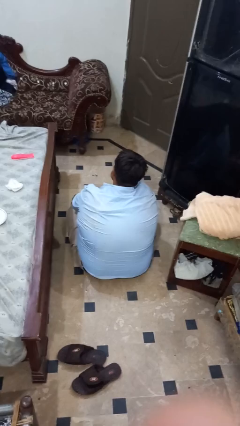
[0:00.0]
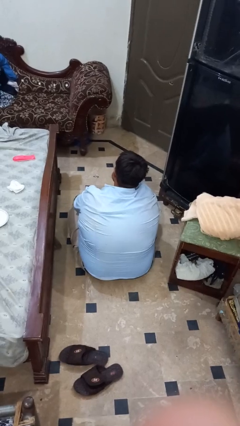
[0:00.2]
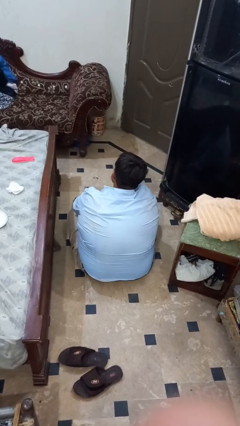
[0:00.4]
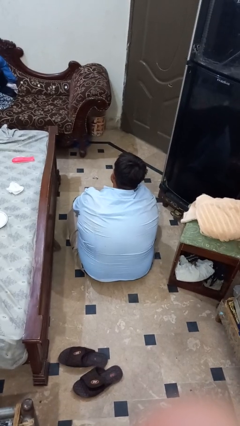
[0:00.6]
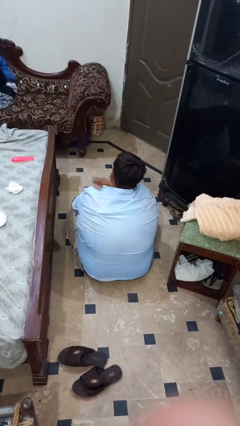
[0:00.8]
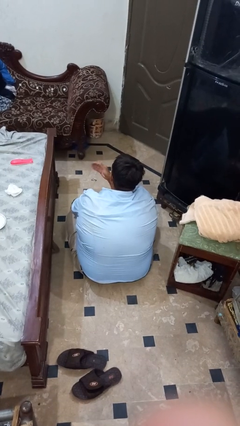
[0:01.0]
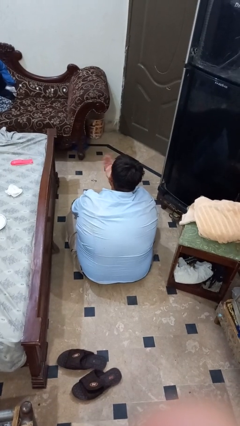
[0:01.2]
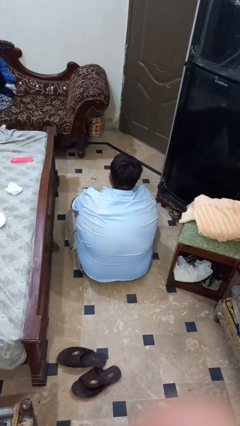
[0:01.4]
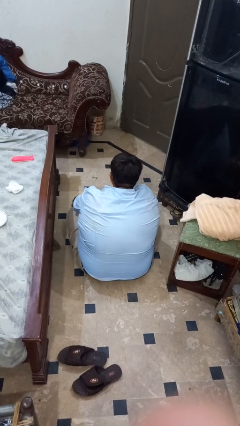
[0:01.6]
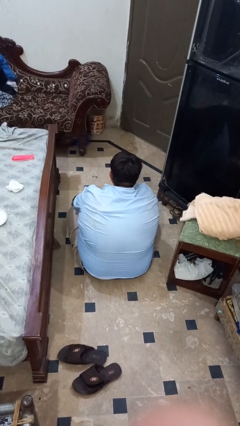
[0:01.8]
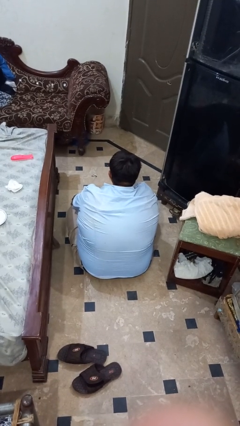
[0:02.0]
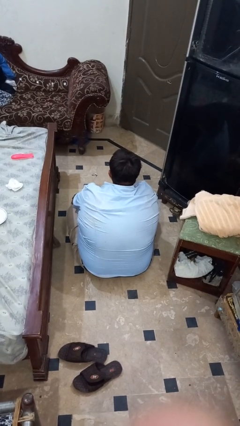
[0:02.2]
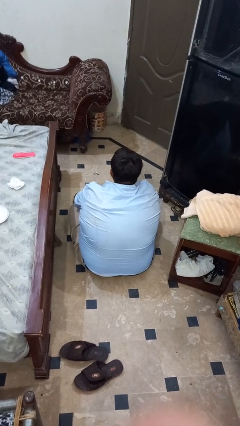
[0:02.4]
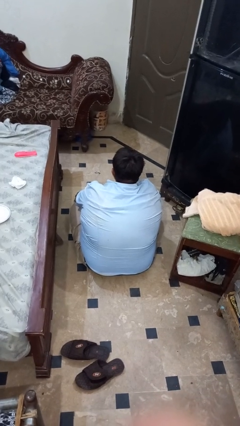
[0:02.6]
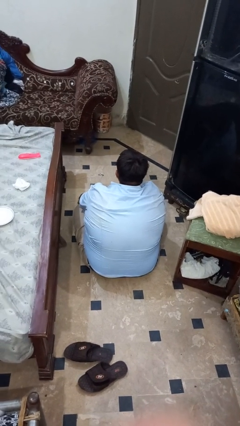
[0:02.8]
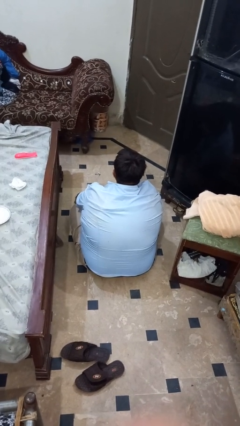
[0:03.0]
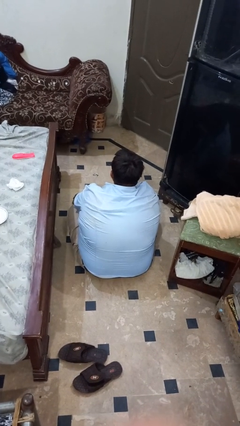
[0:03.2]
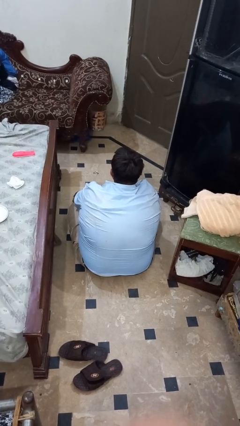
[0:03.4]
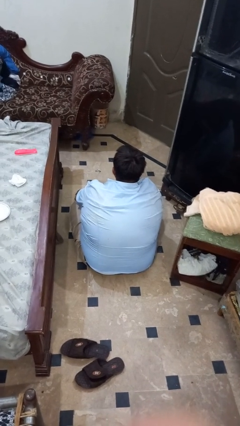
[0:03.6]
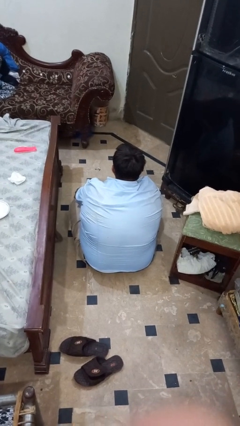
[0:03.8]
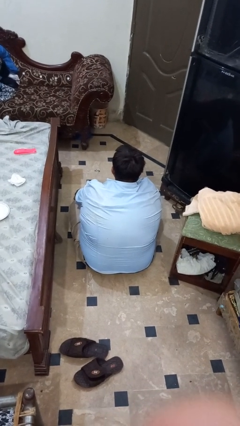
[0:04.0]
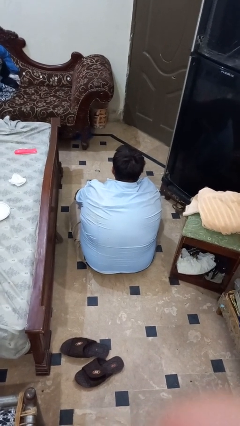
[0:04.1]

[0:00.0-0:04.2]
person gestures blow kiss

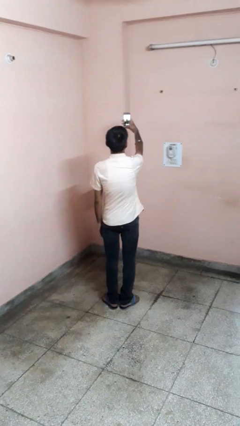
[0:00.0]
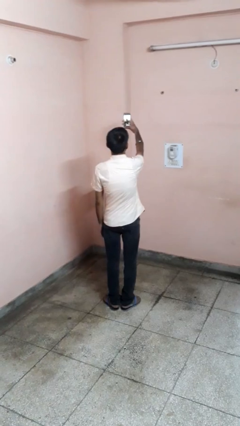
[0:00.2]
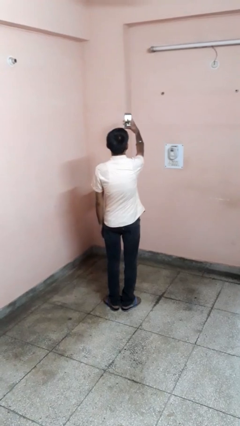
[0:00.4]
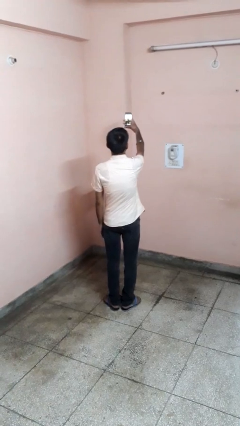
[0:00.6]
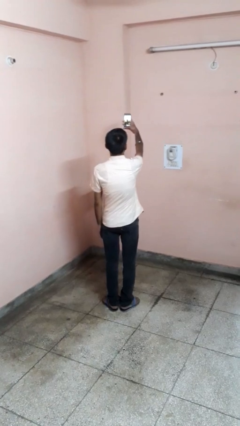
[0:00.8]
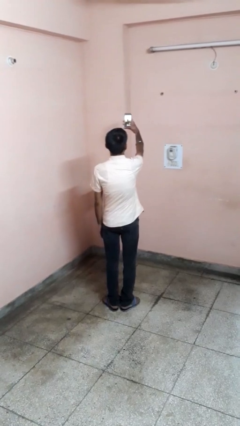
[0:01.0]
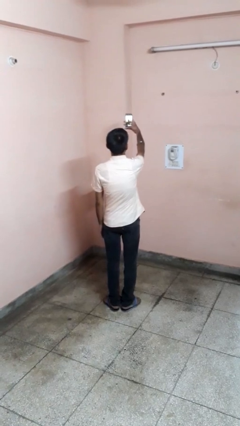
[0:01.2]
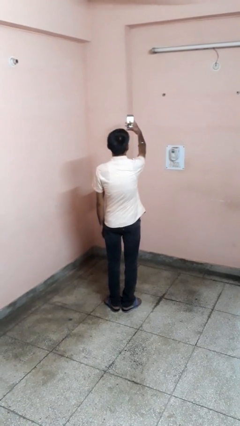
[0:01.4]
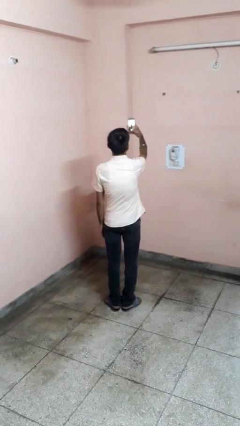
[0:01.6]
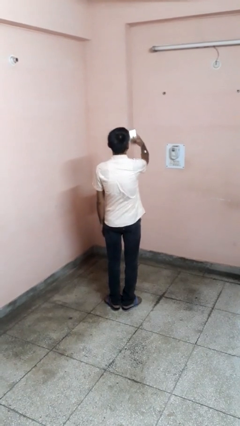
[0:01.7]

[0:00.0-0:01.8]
person takes selfie

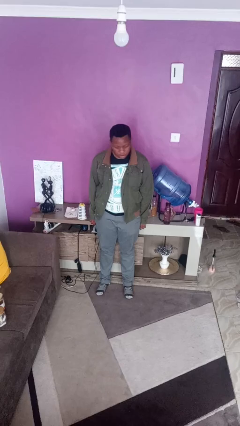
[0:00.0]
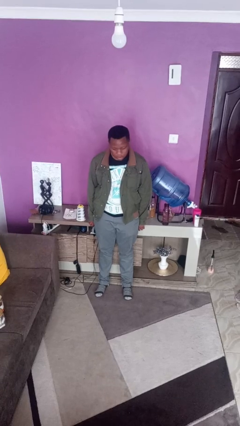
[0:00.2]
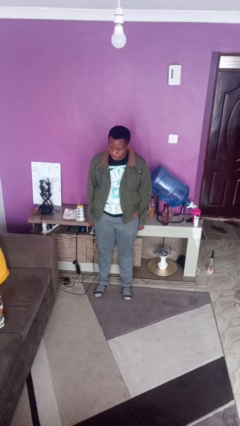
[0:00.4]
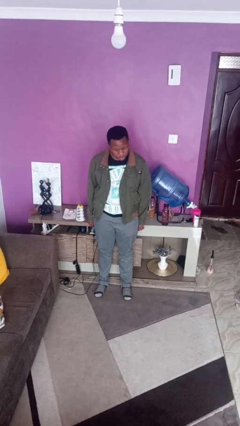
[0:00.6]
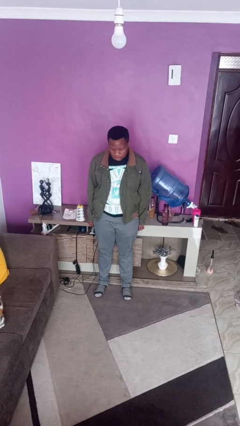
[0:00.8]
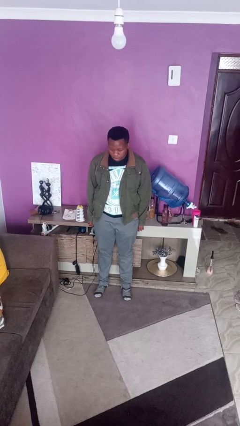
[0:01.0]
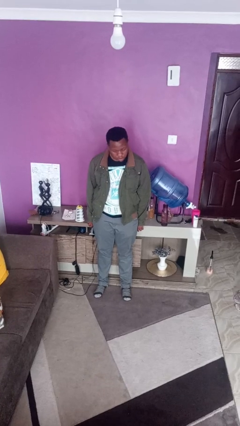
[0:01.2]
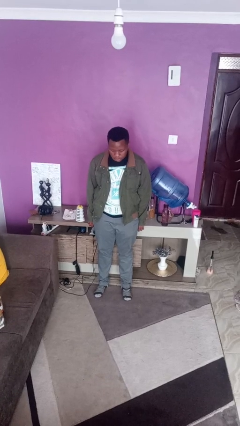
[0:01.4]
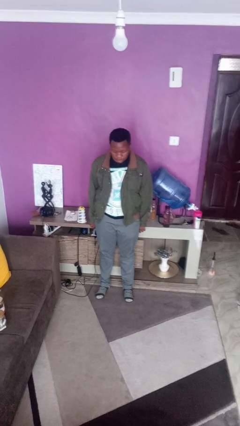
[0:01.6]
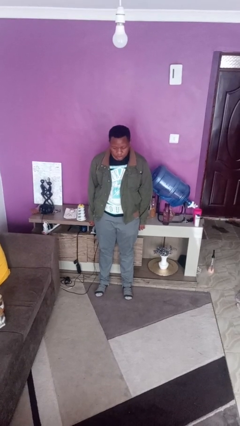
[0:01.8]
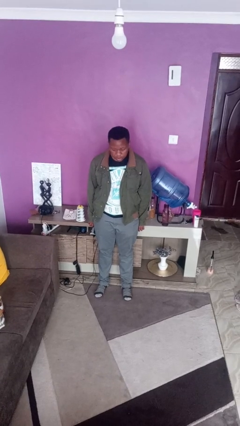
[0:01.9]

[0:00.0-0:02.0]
person shakes head

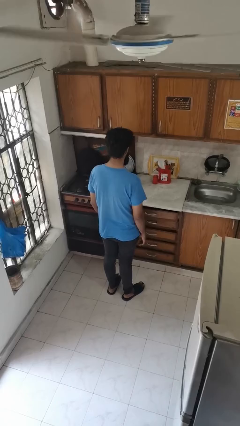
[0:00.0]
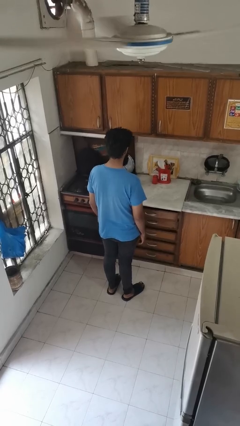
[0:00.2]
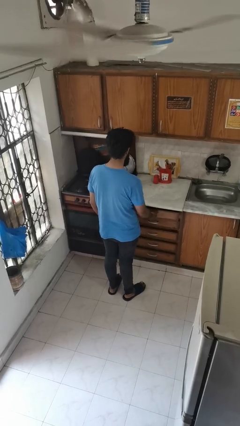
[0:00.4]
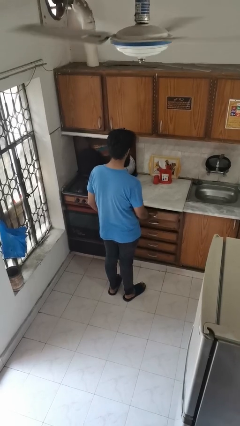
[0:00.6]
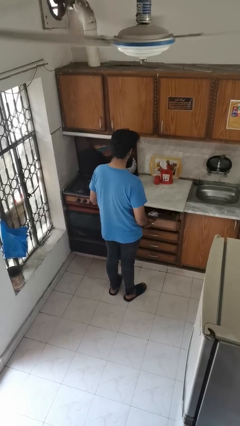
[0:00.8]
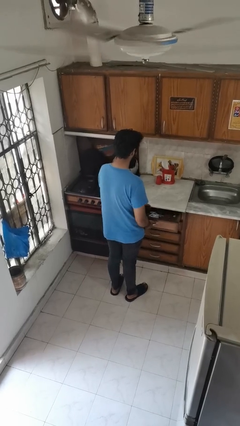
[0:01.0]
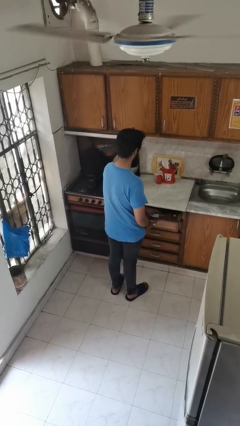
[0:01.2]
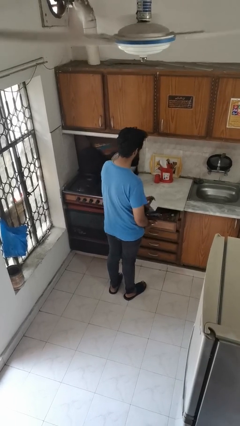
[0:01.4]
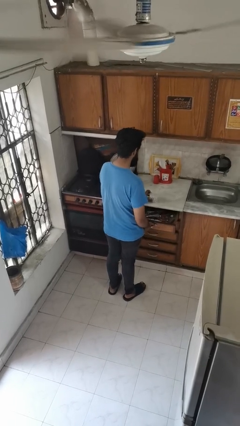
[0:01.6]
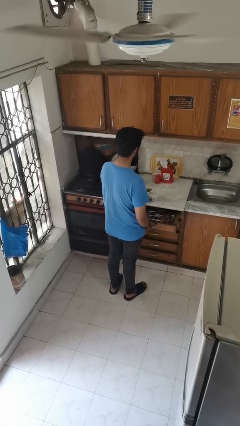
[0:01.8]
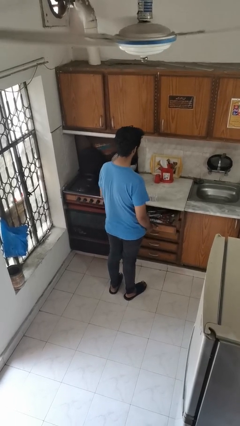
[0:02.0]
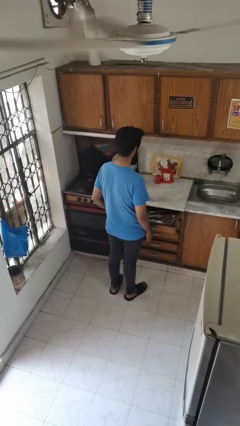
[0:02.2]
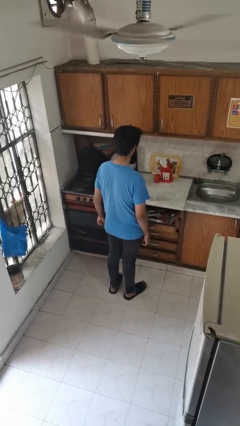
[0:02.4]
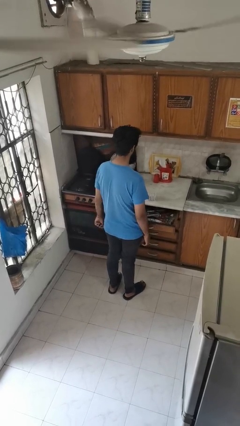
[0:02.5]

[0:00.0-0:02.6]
person takes object from kitchen drawer

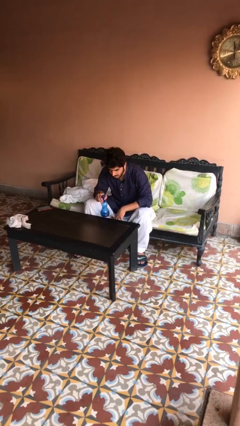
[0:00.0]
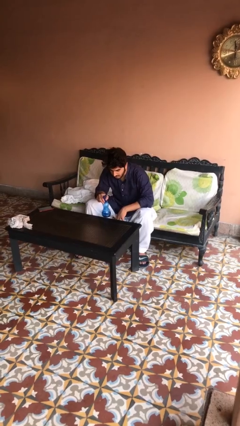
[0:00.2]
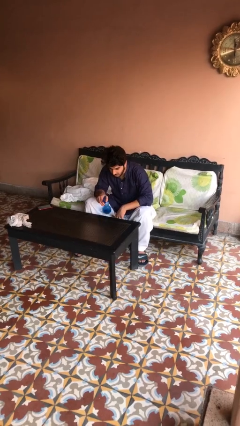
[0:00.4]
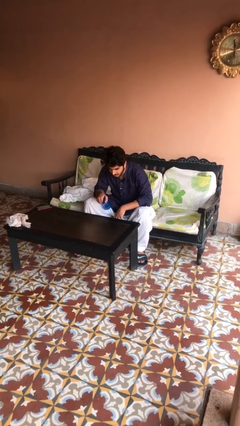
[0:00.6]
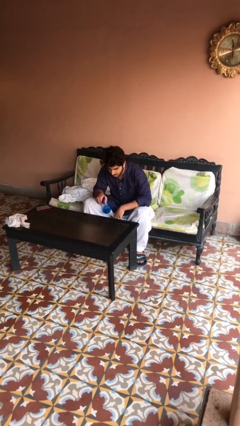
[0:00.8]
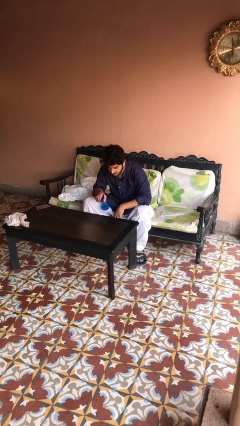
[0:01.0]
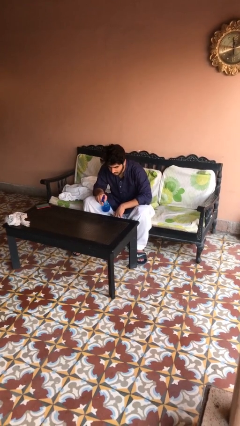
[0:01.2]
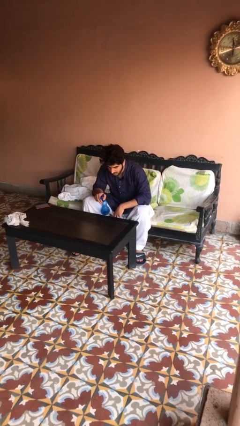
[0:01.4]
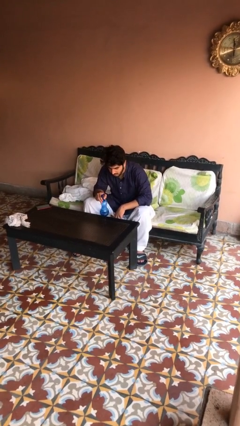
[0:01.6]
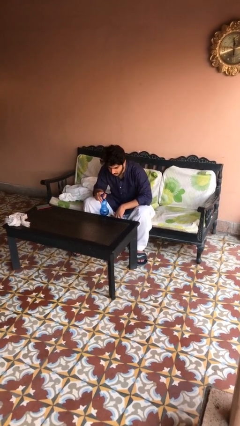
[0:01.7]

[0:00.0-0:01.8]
person sprays from bottle

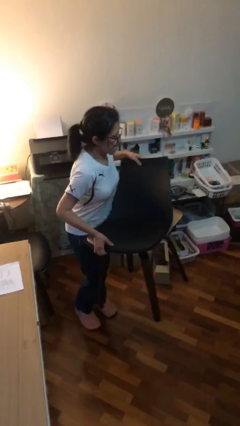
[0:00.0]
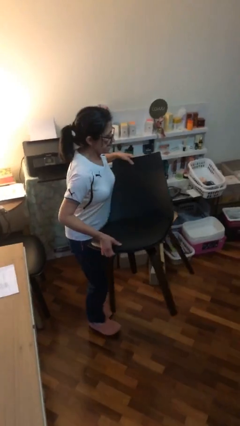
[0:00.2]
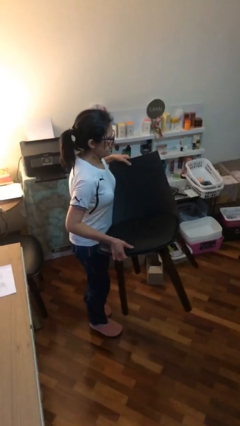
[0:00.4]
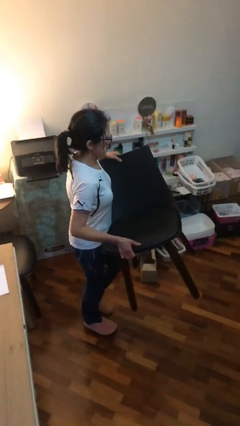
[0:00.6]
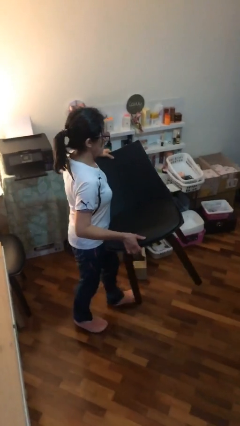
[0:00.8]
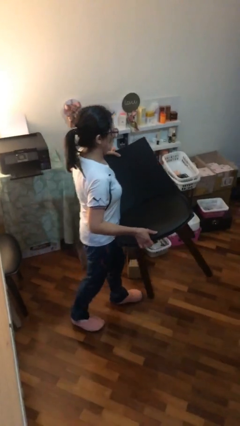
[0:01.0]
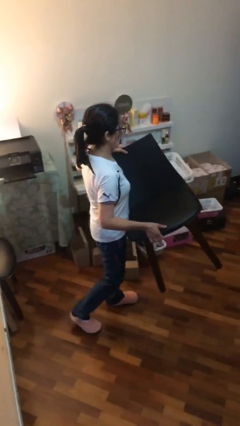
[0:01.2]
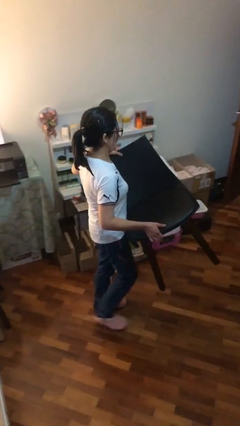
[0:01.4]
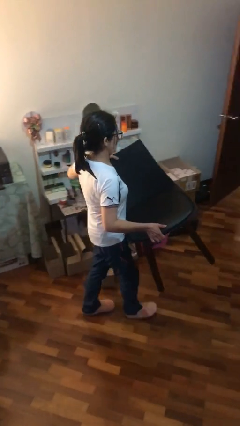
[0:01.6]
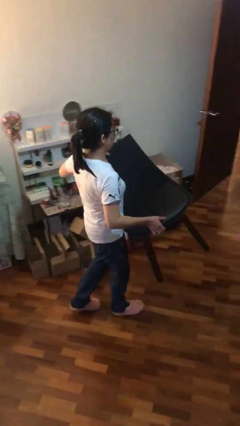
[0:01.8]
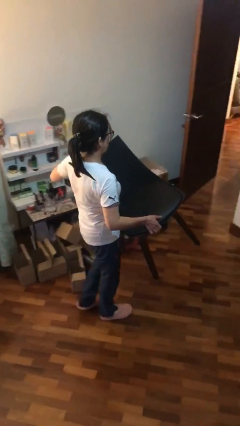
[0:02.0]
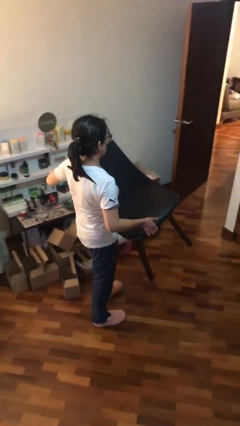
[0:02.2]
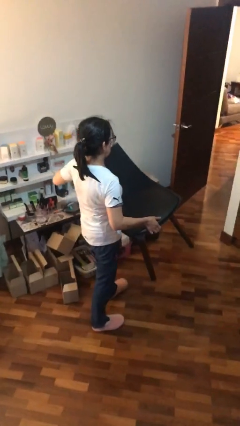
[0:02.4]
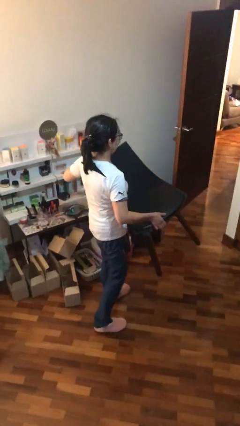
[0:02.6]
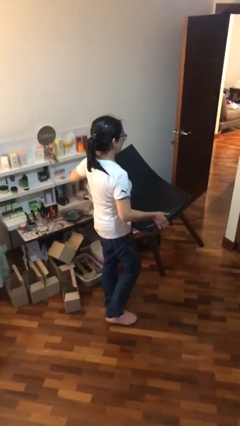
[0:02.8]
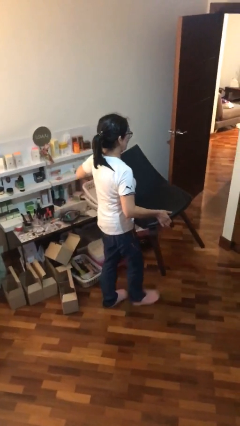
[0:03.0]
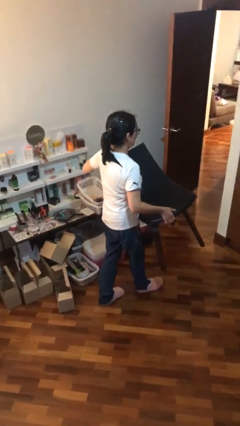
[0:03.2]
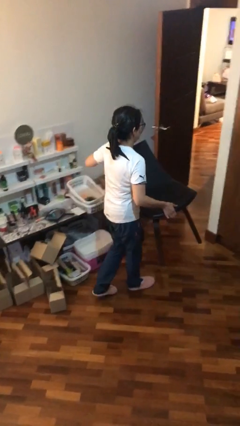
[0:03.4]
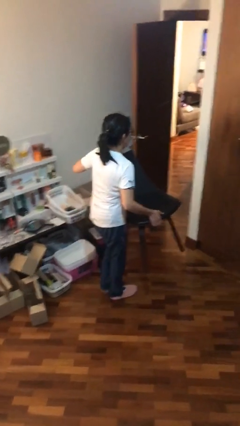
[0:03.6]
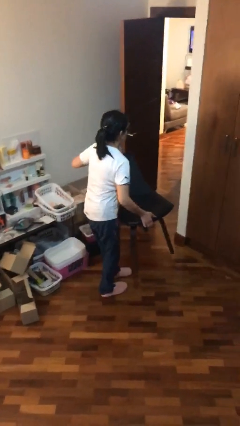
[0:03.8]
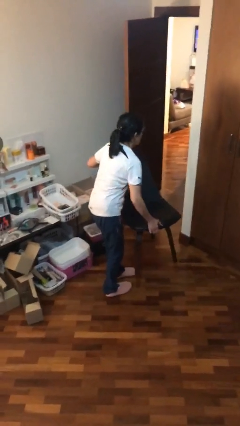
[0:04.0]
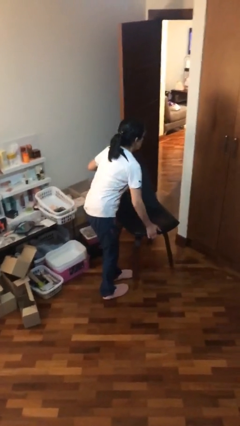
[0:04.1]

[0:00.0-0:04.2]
person carries heavy object

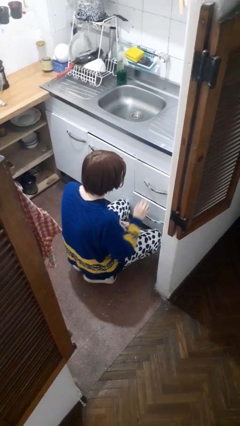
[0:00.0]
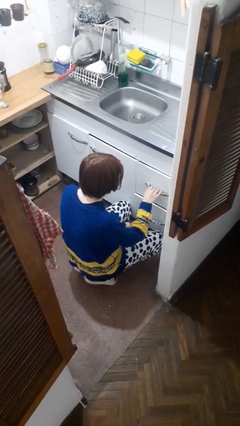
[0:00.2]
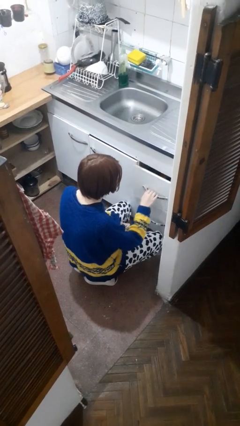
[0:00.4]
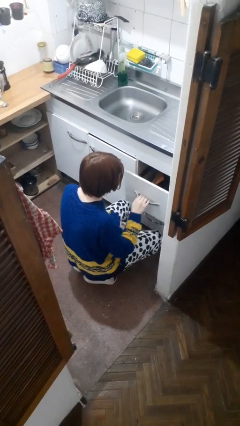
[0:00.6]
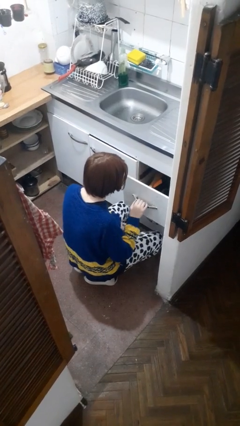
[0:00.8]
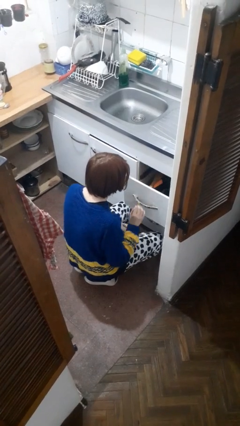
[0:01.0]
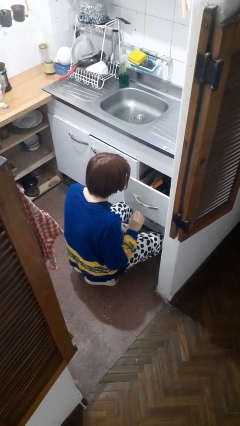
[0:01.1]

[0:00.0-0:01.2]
person opens kitchen drawer
